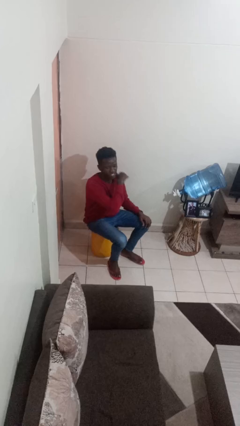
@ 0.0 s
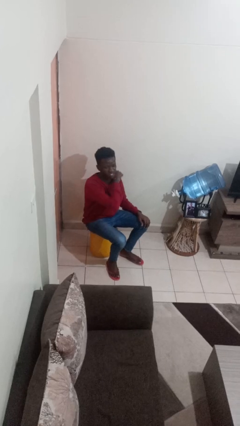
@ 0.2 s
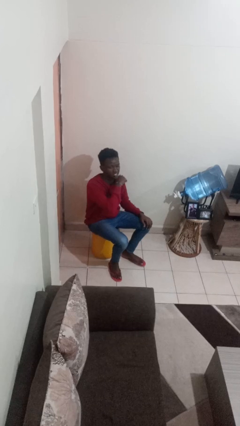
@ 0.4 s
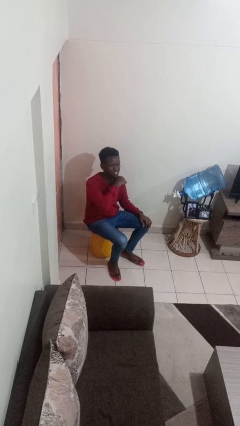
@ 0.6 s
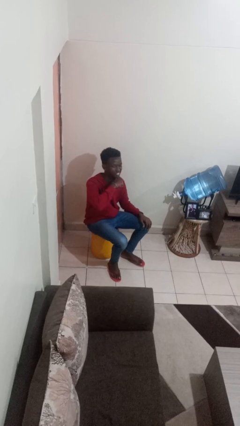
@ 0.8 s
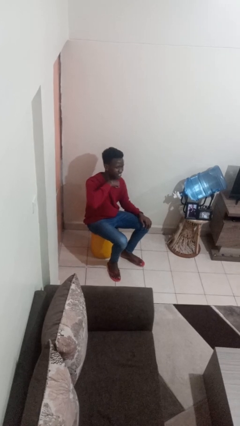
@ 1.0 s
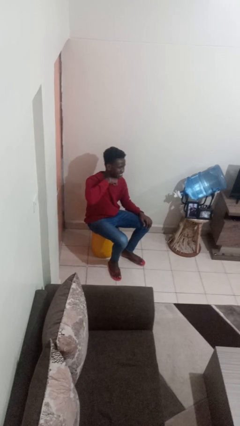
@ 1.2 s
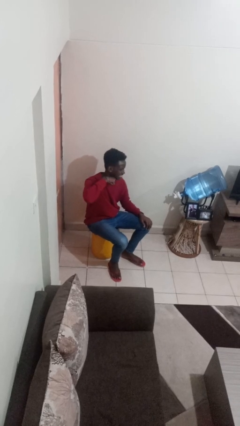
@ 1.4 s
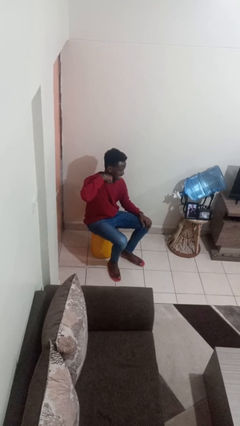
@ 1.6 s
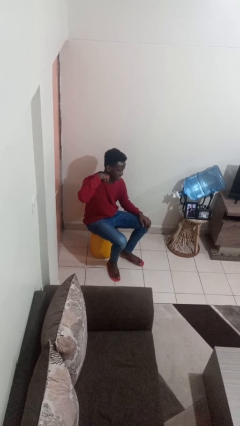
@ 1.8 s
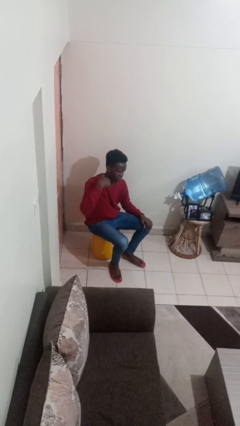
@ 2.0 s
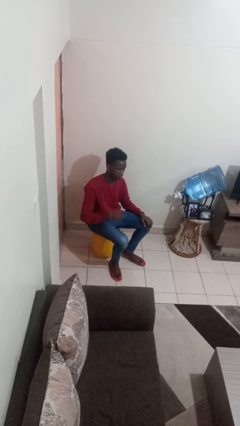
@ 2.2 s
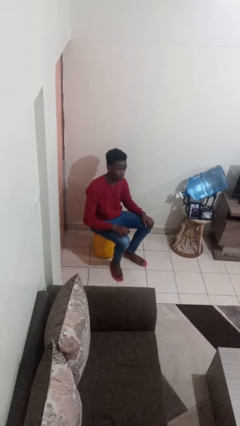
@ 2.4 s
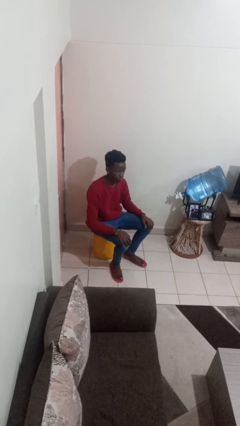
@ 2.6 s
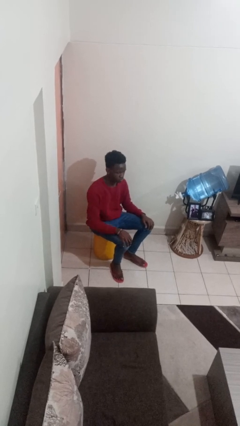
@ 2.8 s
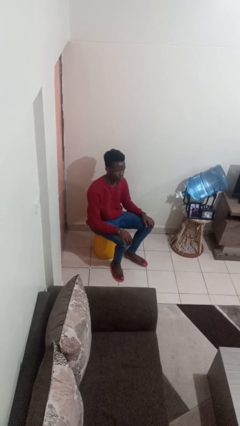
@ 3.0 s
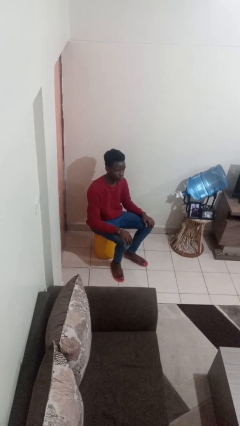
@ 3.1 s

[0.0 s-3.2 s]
person gestures cut

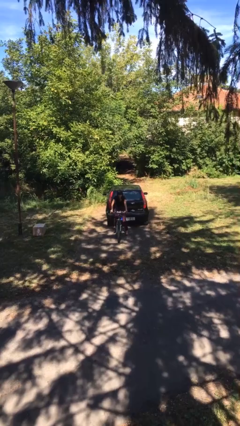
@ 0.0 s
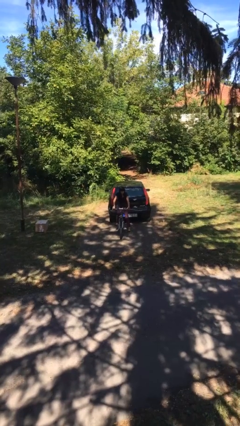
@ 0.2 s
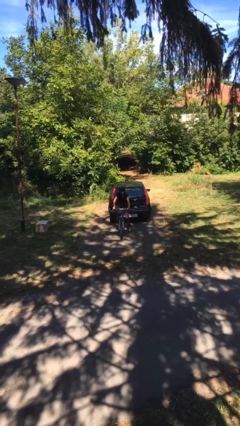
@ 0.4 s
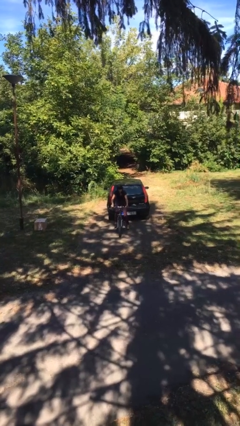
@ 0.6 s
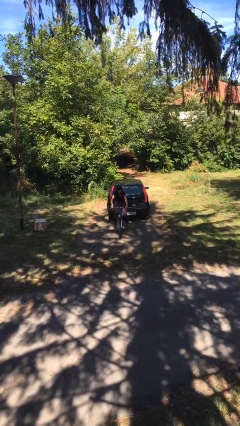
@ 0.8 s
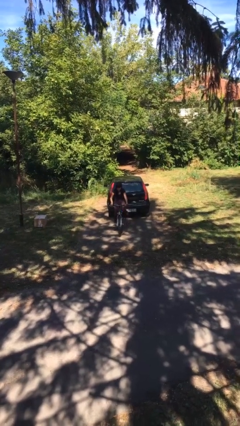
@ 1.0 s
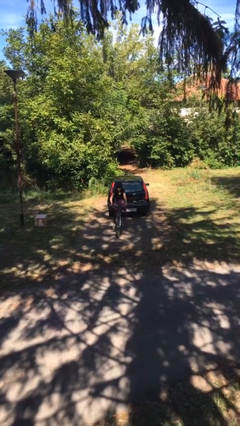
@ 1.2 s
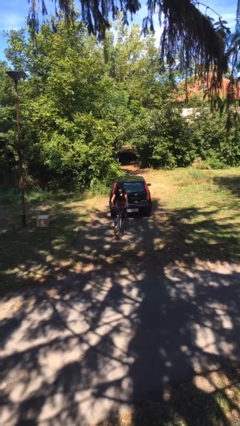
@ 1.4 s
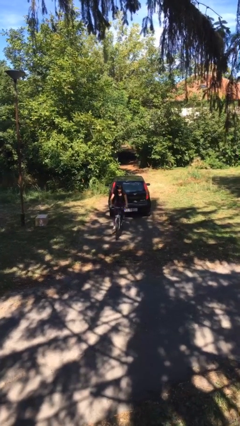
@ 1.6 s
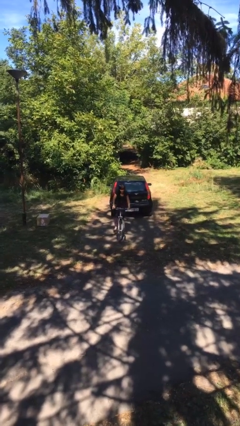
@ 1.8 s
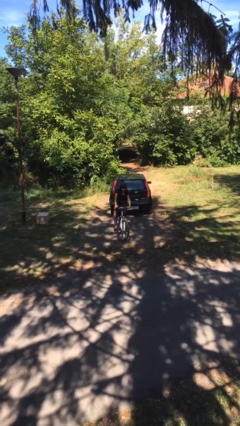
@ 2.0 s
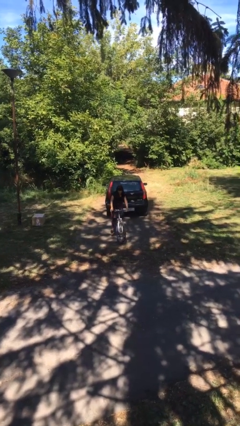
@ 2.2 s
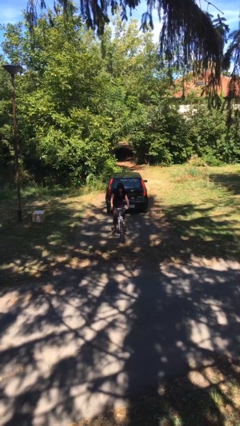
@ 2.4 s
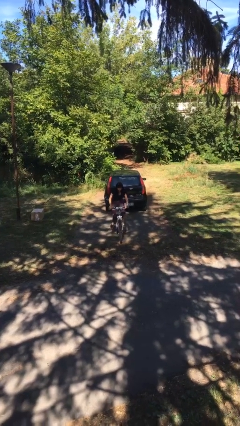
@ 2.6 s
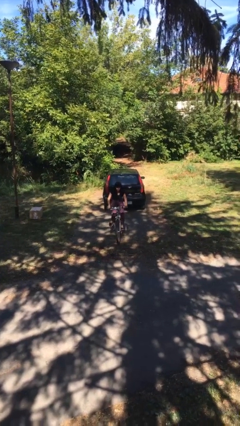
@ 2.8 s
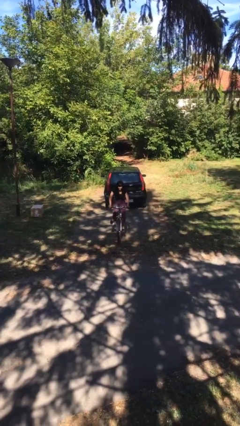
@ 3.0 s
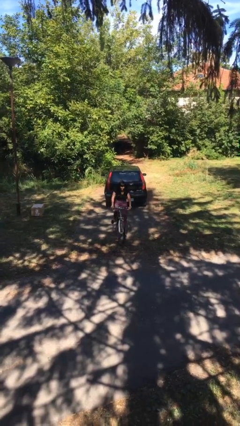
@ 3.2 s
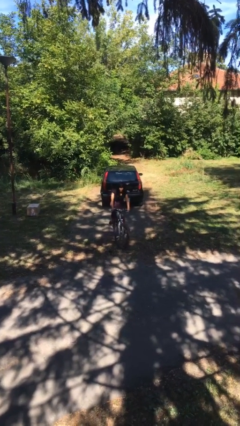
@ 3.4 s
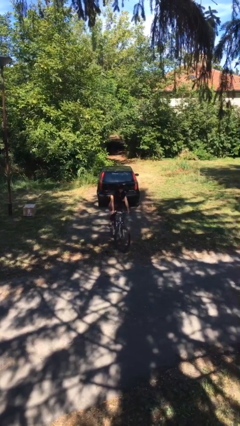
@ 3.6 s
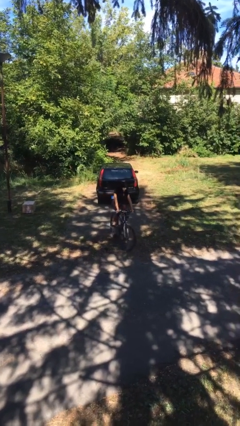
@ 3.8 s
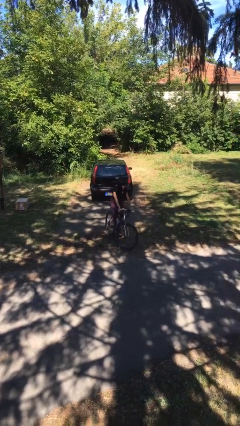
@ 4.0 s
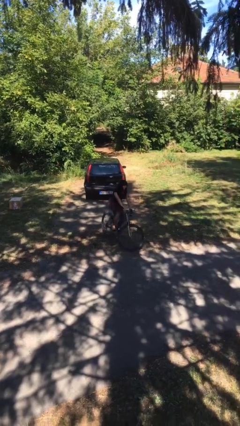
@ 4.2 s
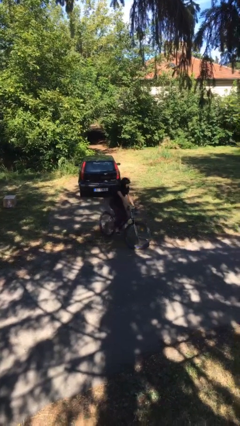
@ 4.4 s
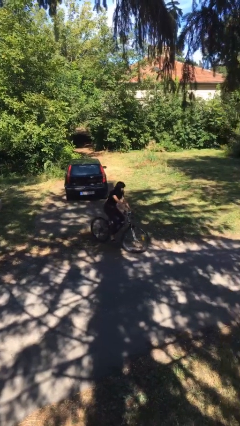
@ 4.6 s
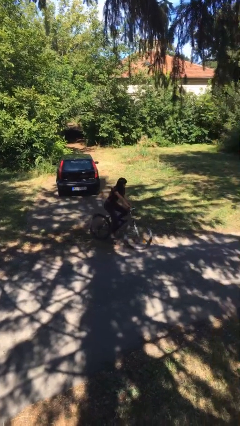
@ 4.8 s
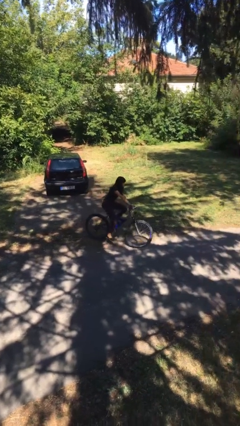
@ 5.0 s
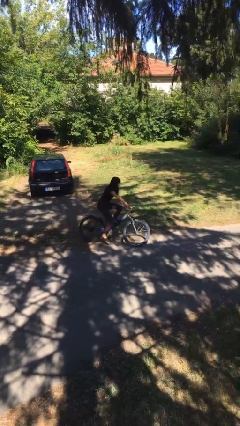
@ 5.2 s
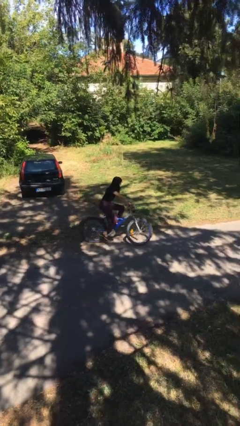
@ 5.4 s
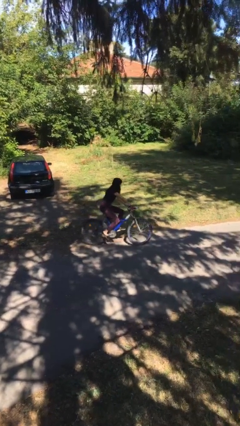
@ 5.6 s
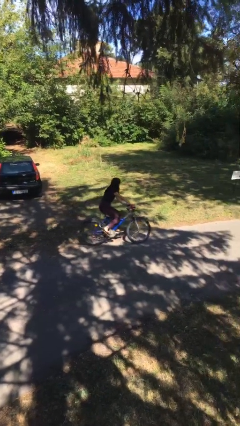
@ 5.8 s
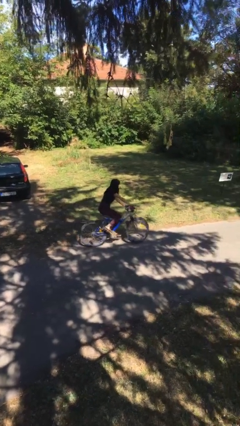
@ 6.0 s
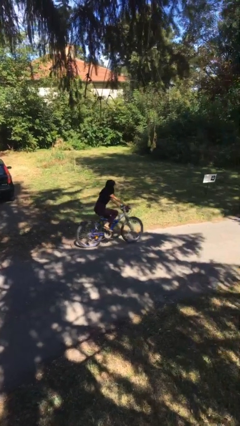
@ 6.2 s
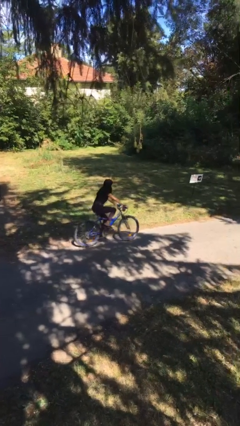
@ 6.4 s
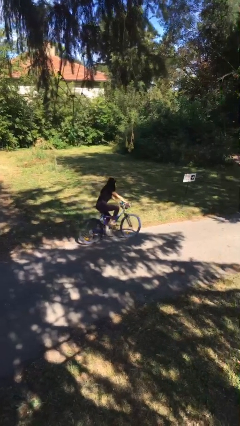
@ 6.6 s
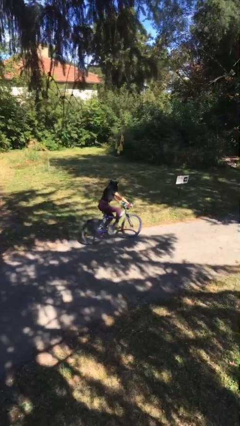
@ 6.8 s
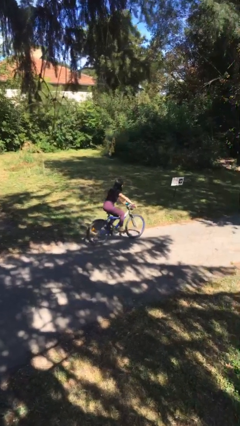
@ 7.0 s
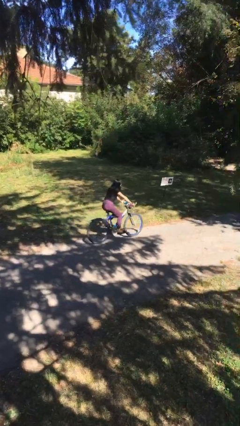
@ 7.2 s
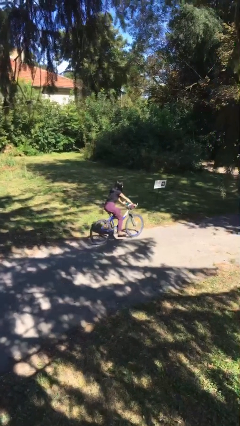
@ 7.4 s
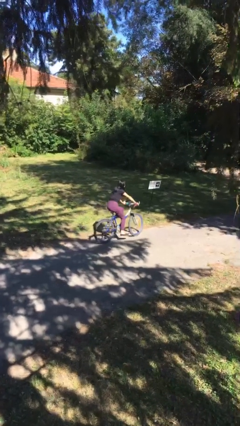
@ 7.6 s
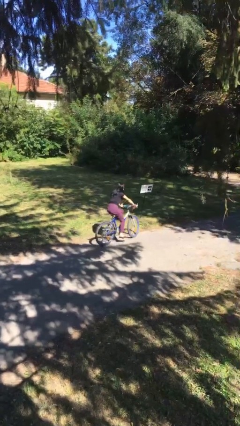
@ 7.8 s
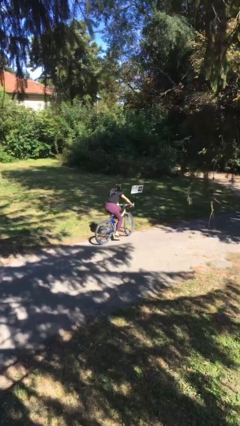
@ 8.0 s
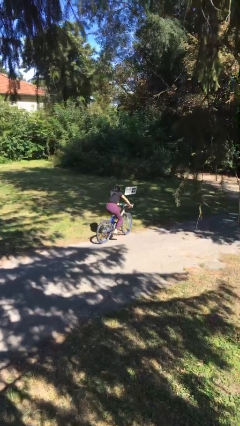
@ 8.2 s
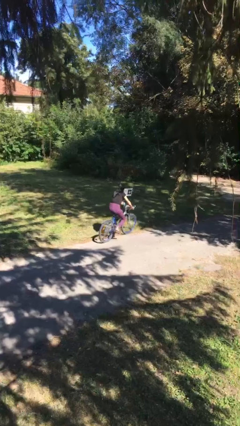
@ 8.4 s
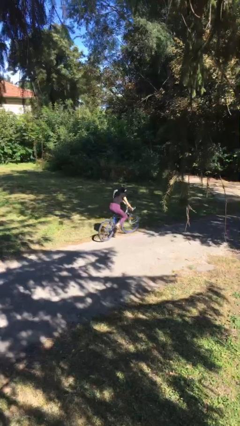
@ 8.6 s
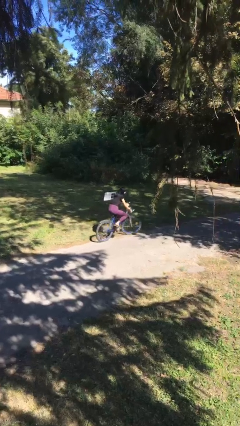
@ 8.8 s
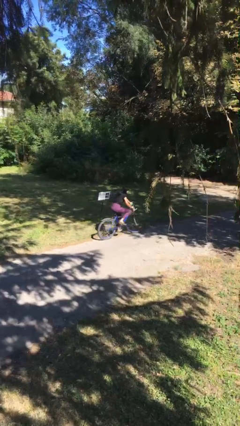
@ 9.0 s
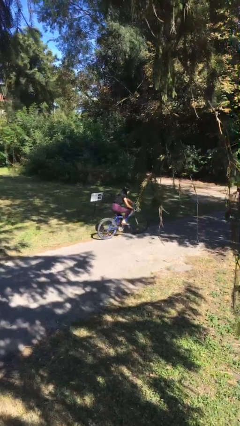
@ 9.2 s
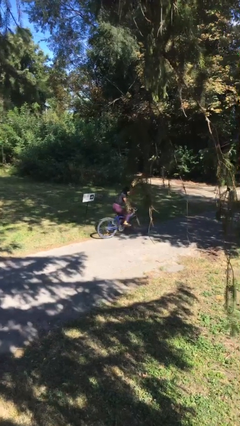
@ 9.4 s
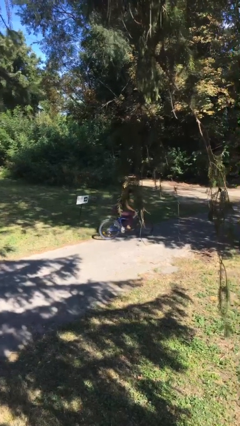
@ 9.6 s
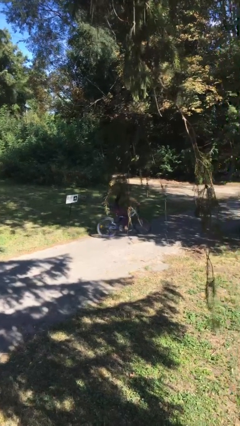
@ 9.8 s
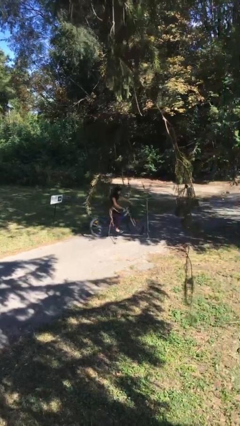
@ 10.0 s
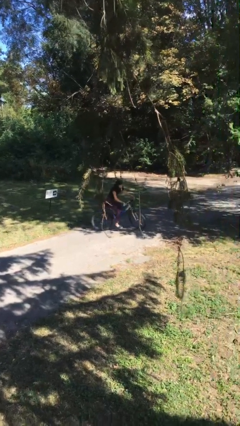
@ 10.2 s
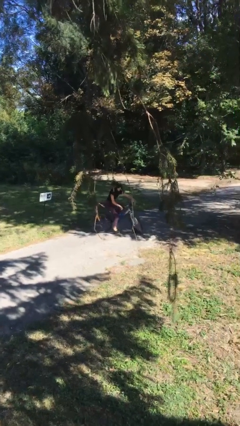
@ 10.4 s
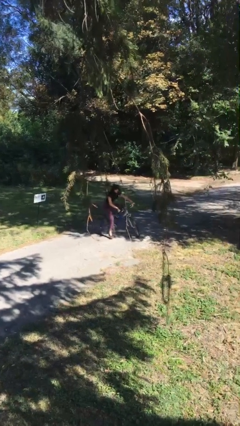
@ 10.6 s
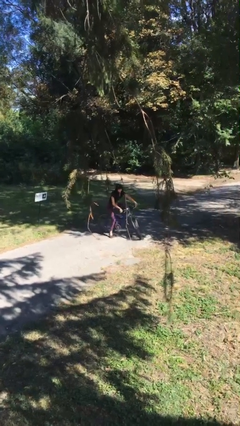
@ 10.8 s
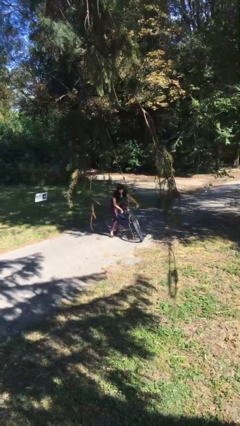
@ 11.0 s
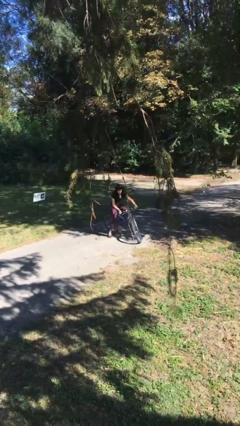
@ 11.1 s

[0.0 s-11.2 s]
person rides bicycle

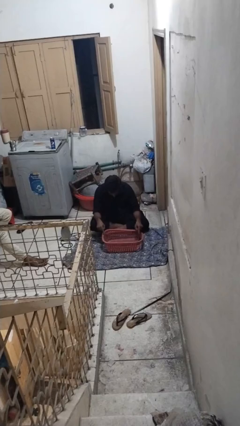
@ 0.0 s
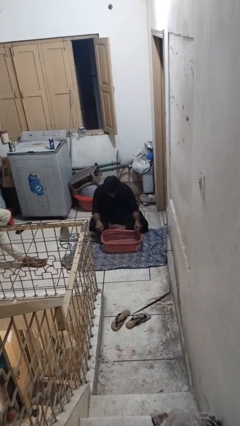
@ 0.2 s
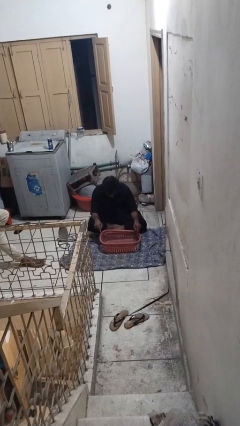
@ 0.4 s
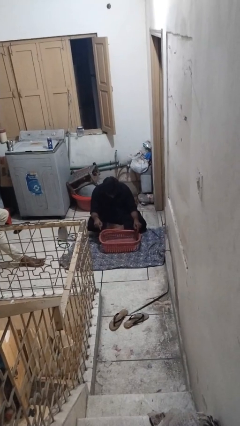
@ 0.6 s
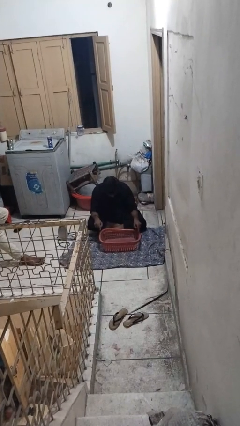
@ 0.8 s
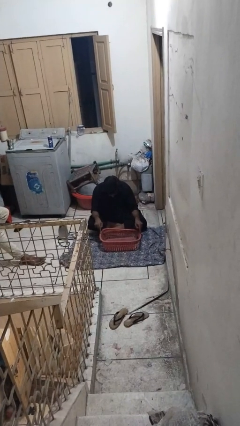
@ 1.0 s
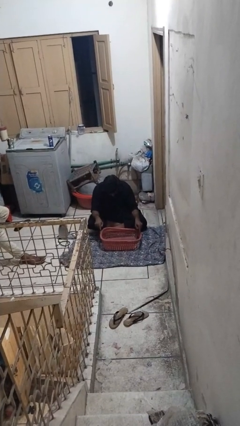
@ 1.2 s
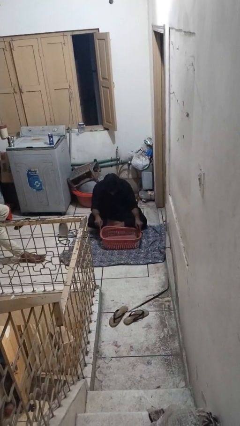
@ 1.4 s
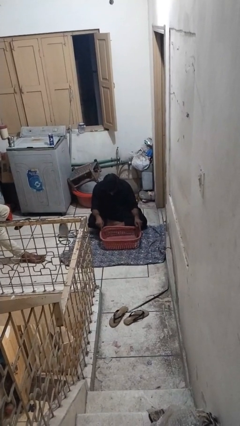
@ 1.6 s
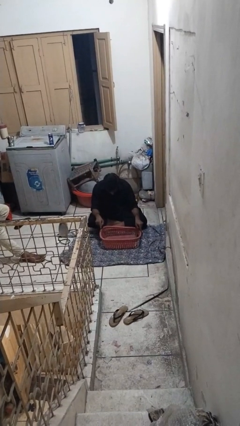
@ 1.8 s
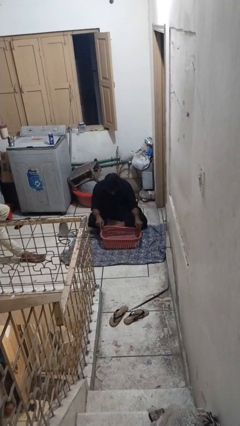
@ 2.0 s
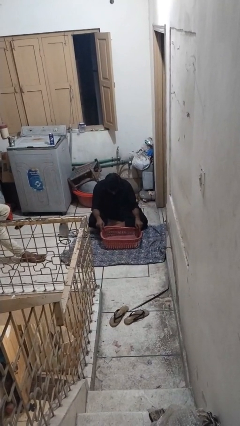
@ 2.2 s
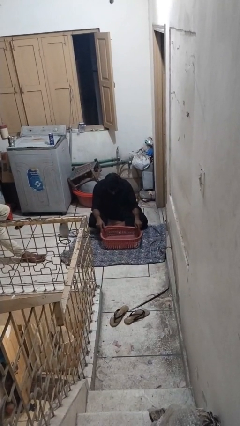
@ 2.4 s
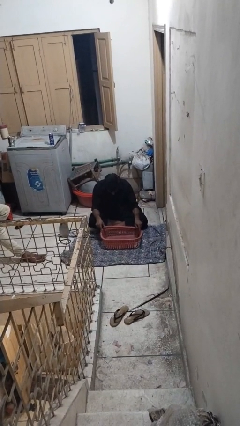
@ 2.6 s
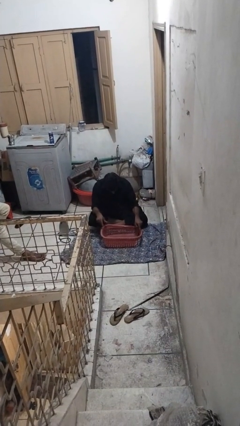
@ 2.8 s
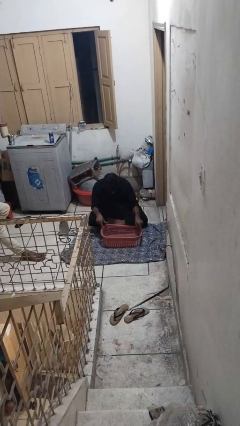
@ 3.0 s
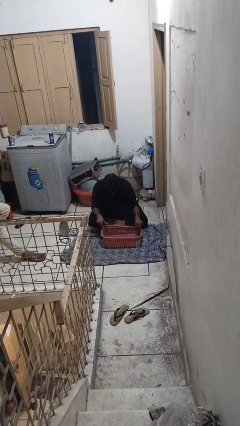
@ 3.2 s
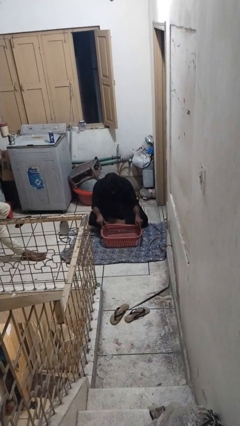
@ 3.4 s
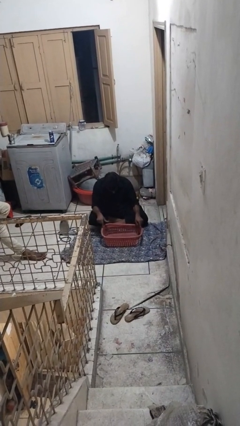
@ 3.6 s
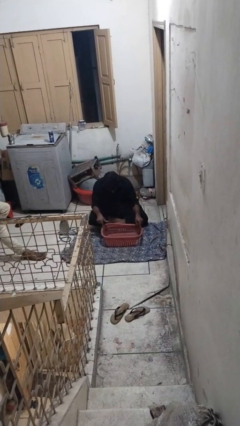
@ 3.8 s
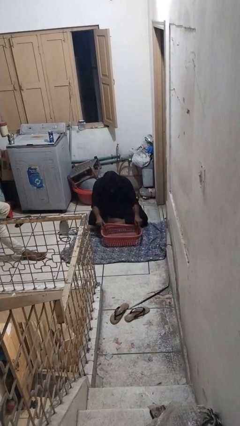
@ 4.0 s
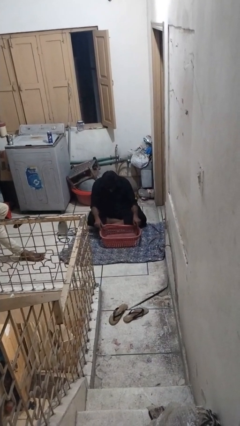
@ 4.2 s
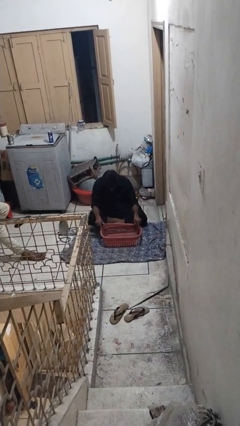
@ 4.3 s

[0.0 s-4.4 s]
person taps object with finger
